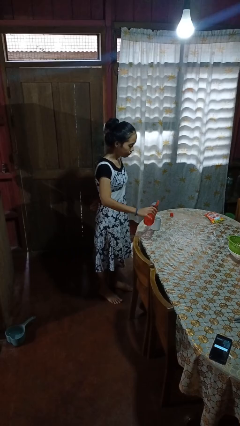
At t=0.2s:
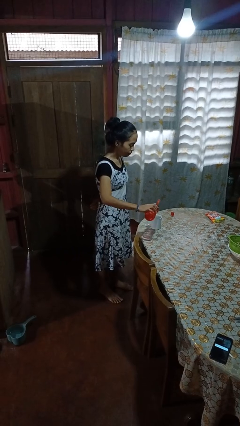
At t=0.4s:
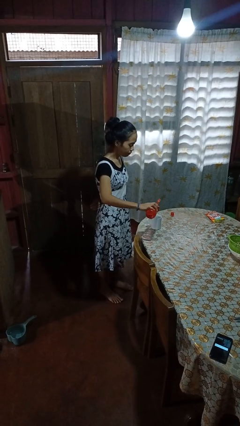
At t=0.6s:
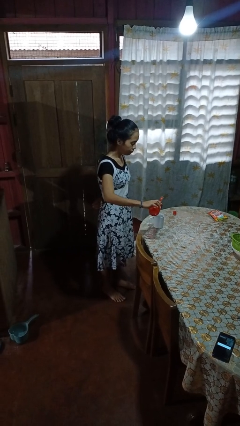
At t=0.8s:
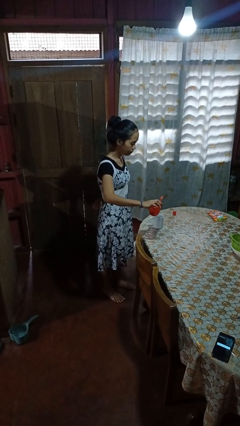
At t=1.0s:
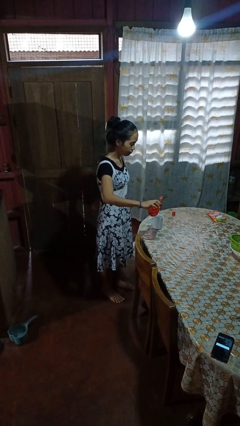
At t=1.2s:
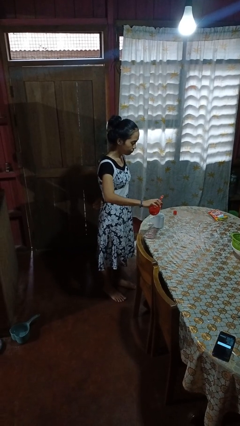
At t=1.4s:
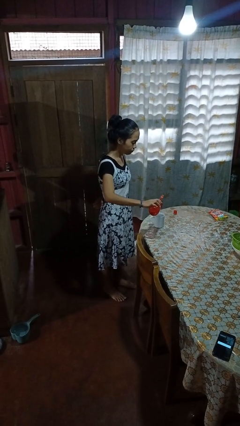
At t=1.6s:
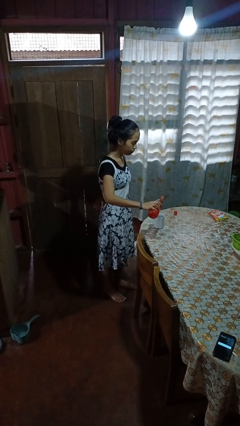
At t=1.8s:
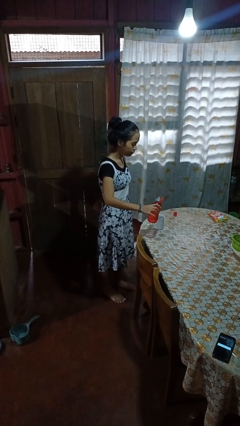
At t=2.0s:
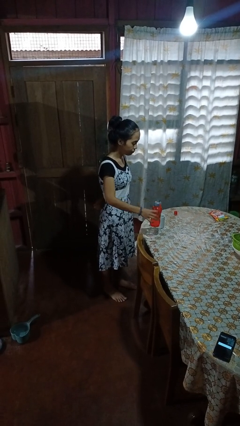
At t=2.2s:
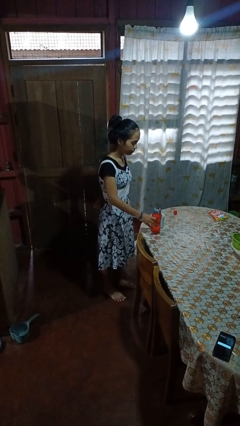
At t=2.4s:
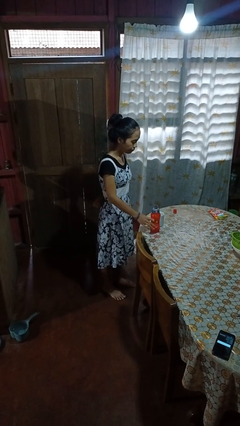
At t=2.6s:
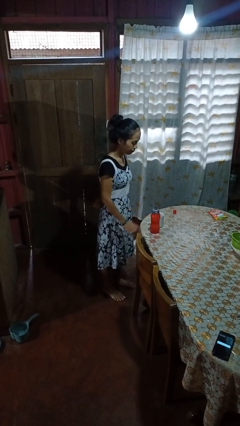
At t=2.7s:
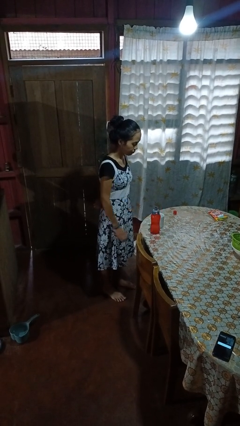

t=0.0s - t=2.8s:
person pours liquid into cup

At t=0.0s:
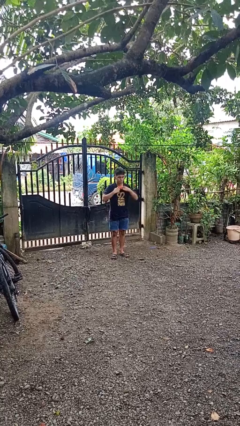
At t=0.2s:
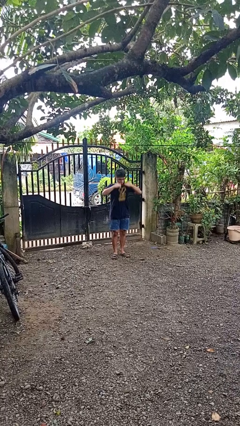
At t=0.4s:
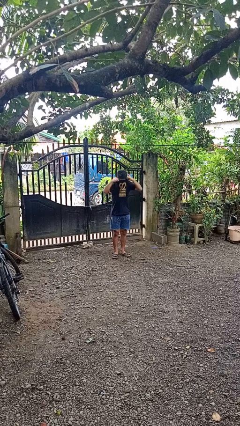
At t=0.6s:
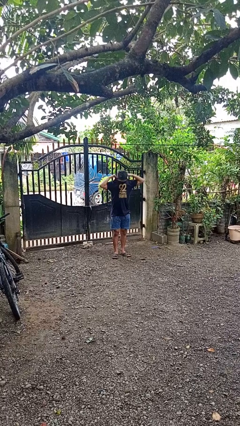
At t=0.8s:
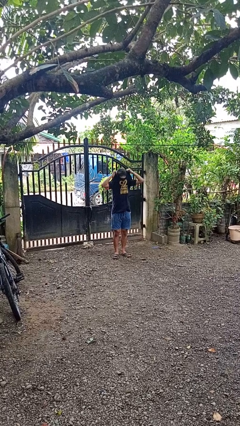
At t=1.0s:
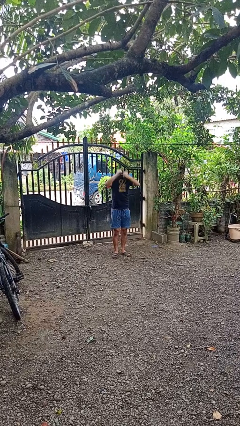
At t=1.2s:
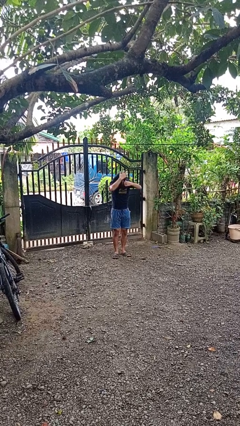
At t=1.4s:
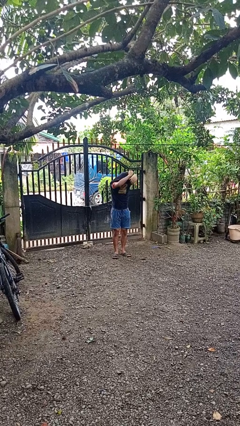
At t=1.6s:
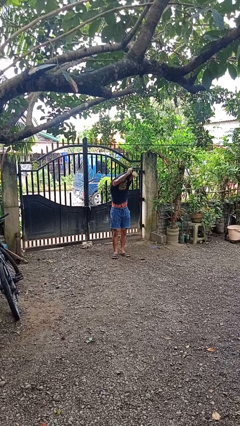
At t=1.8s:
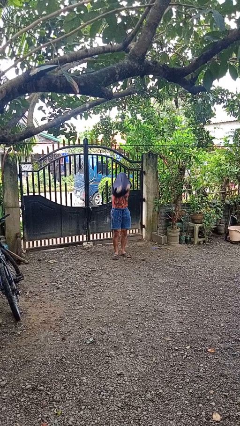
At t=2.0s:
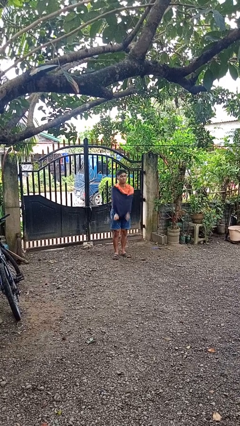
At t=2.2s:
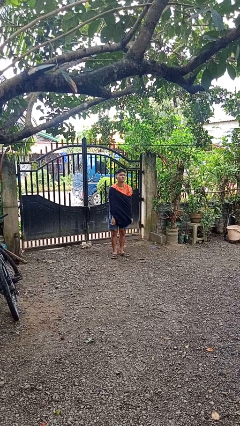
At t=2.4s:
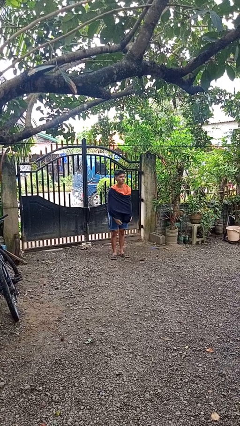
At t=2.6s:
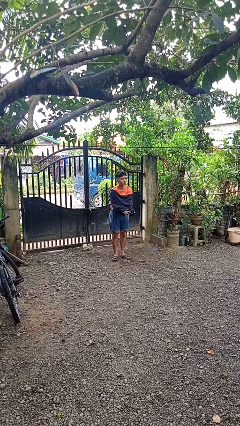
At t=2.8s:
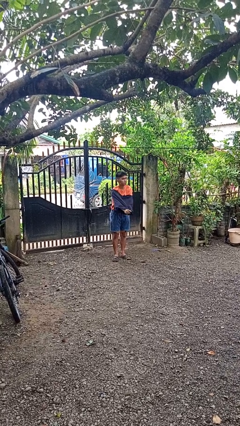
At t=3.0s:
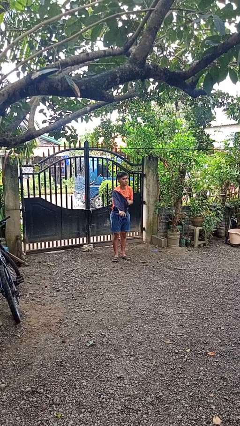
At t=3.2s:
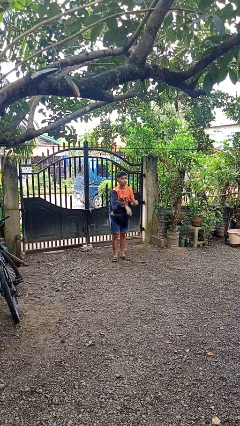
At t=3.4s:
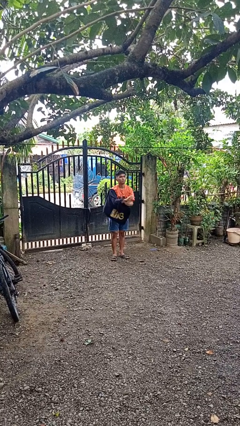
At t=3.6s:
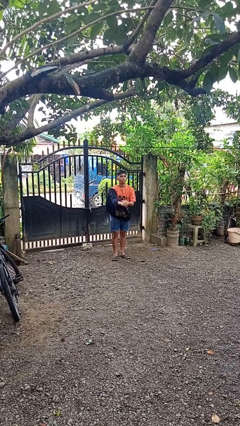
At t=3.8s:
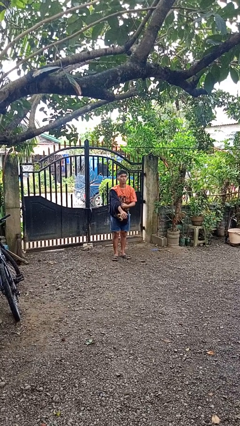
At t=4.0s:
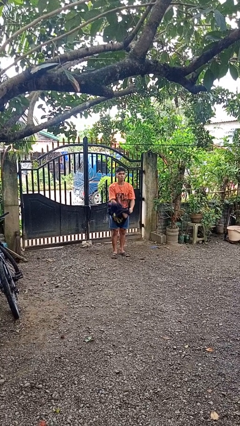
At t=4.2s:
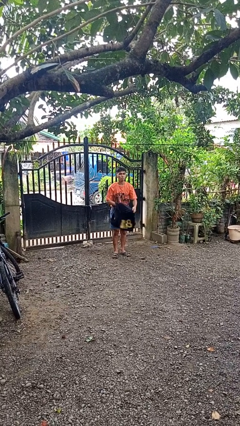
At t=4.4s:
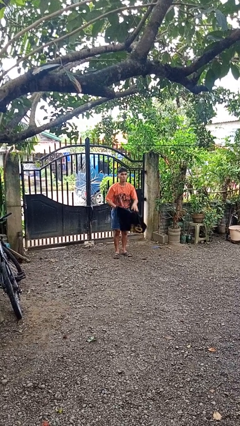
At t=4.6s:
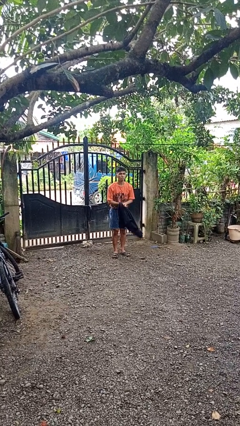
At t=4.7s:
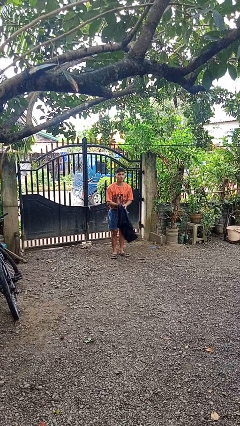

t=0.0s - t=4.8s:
person takes off shirt

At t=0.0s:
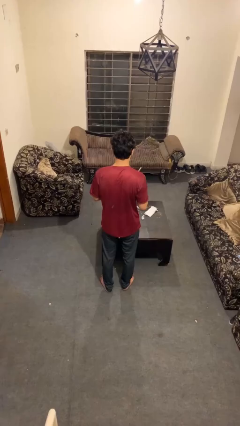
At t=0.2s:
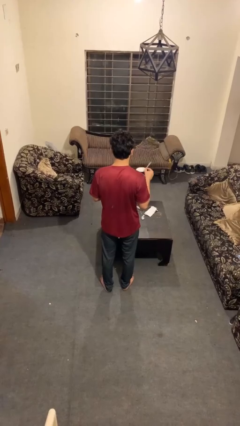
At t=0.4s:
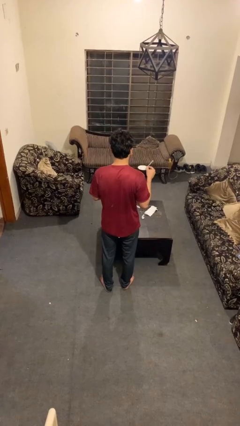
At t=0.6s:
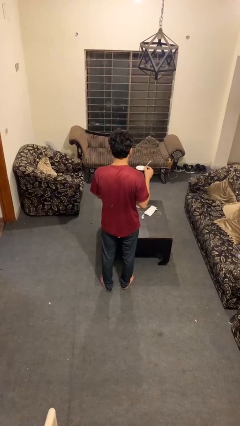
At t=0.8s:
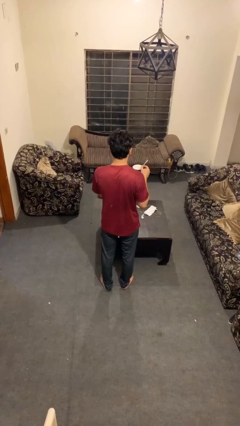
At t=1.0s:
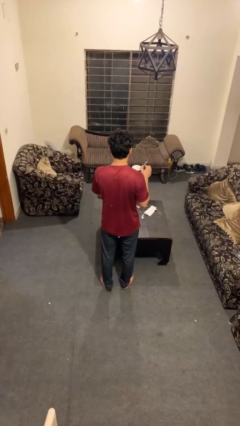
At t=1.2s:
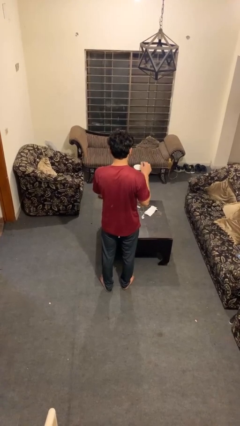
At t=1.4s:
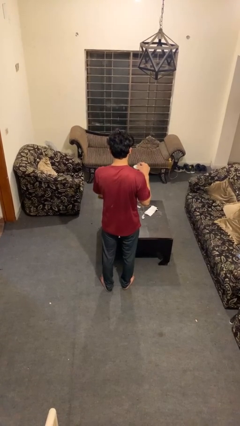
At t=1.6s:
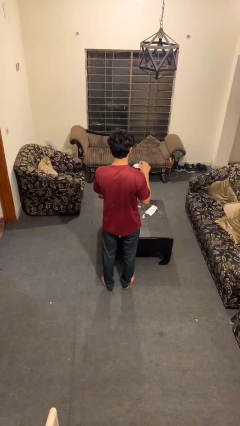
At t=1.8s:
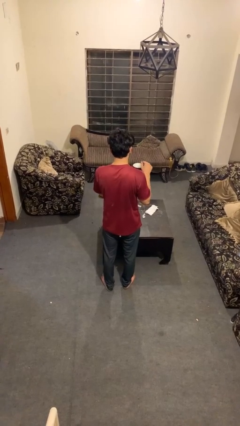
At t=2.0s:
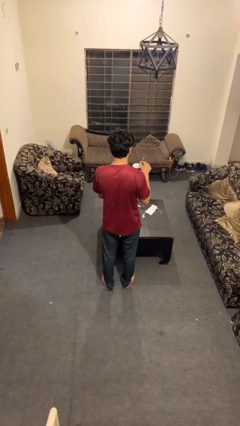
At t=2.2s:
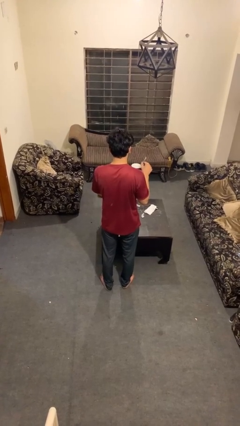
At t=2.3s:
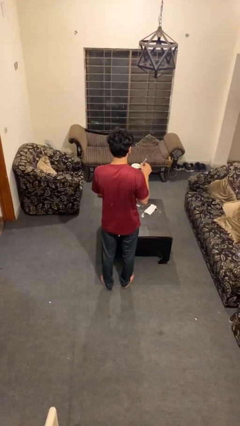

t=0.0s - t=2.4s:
person stirs mug

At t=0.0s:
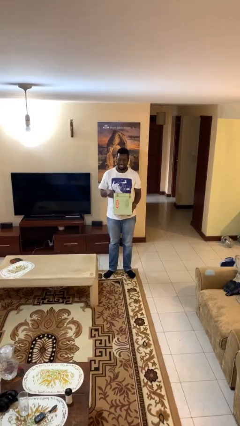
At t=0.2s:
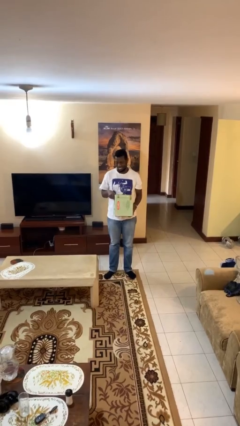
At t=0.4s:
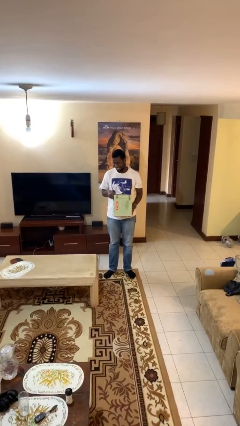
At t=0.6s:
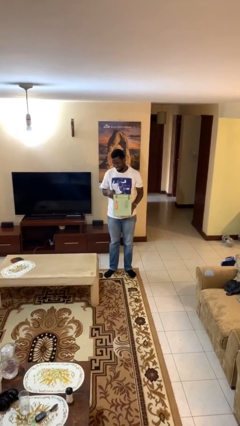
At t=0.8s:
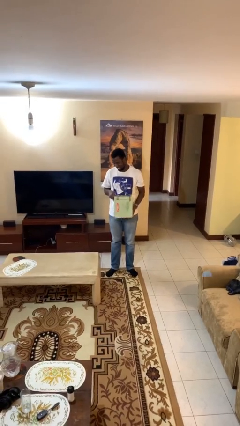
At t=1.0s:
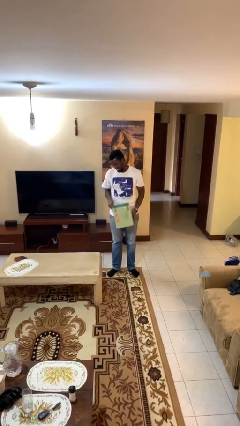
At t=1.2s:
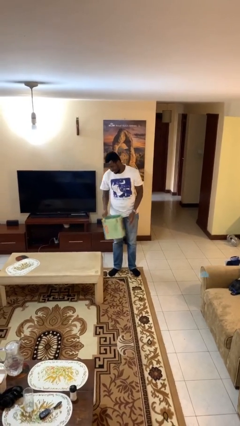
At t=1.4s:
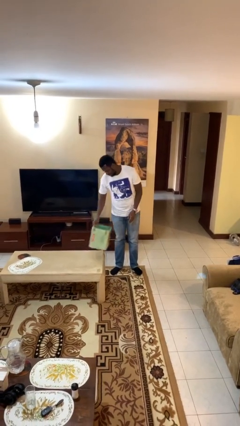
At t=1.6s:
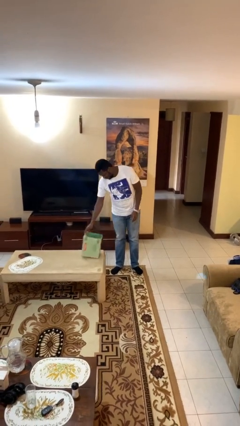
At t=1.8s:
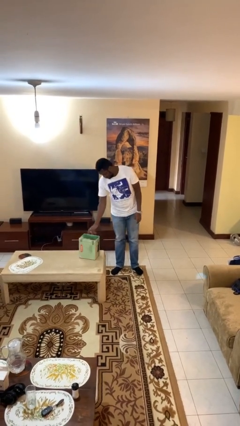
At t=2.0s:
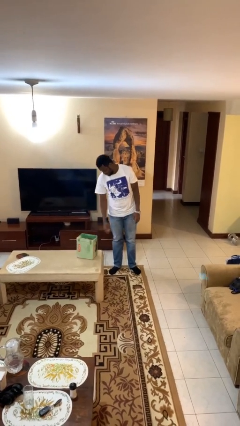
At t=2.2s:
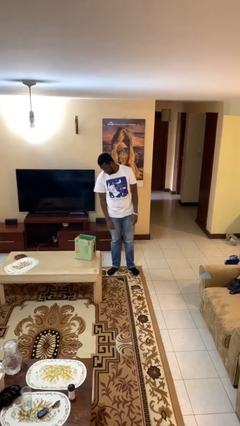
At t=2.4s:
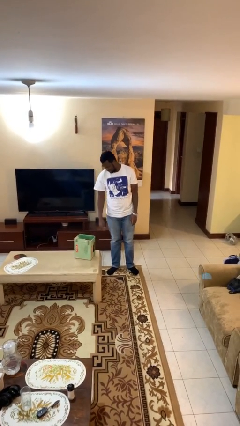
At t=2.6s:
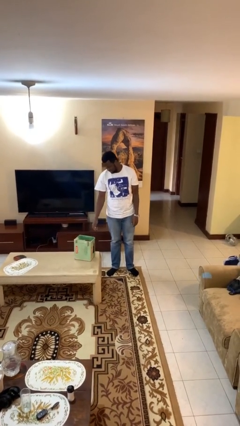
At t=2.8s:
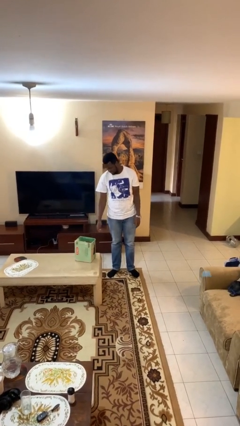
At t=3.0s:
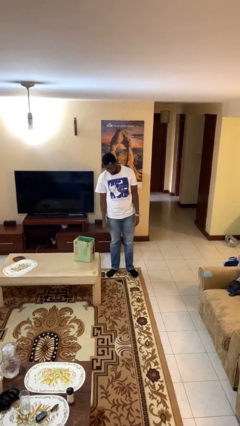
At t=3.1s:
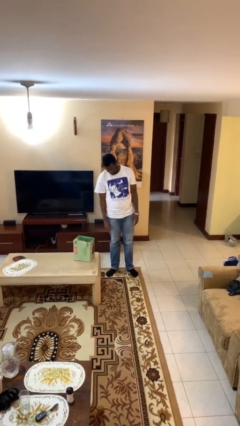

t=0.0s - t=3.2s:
person puts down object on table

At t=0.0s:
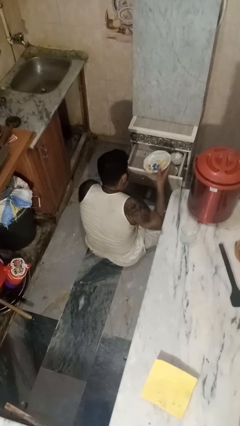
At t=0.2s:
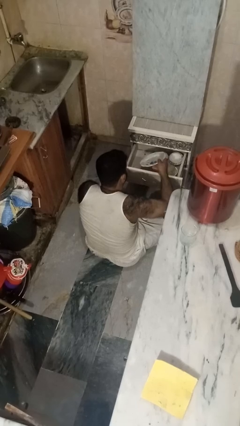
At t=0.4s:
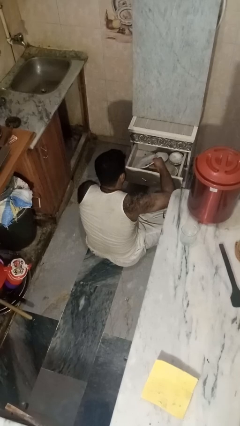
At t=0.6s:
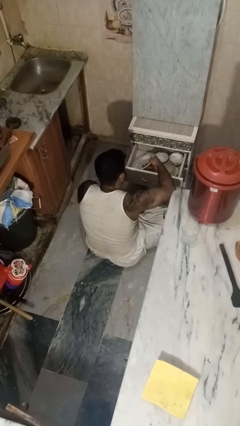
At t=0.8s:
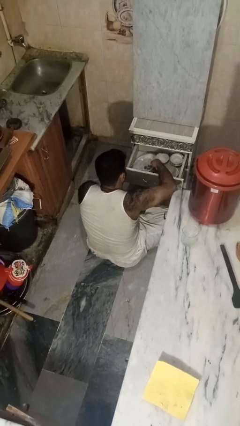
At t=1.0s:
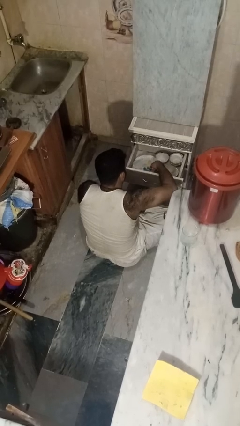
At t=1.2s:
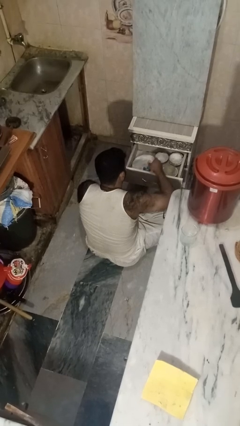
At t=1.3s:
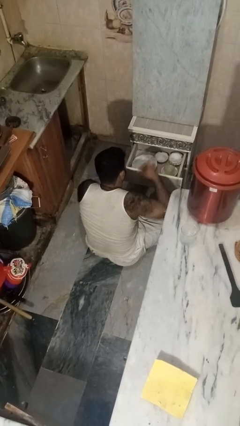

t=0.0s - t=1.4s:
person puts object into kitchen drawer

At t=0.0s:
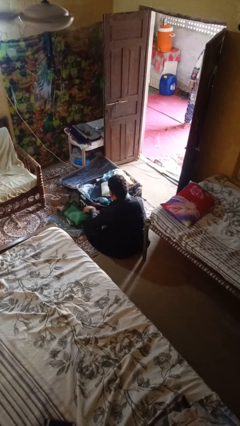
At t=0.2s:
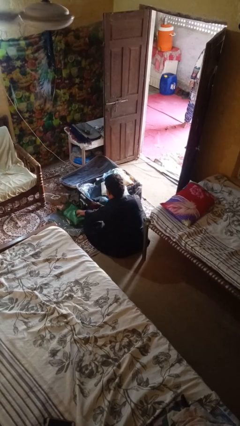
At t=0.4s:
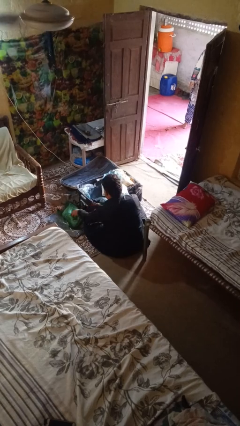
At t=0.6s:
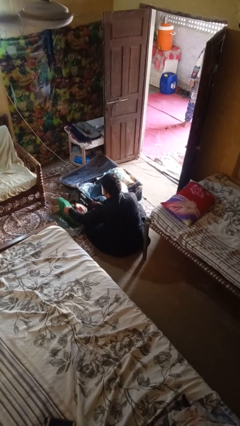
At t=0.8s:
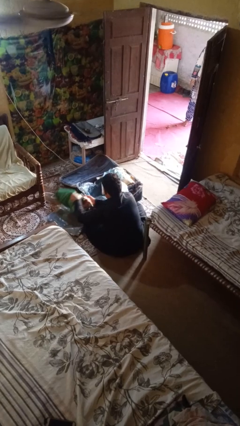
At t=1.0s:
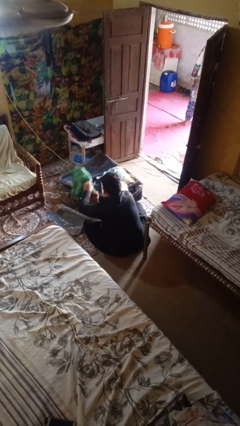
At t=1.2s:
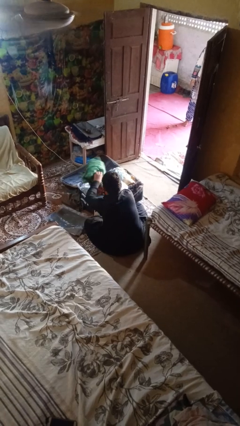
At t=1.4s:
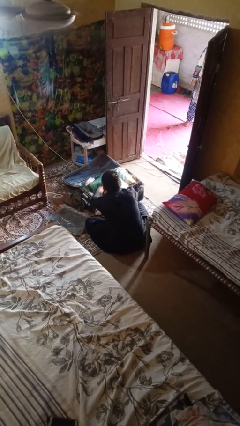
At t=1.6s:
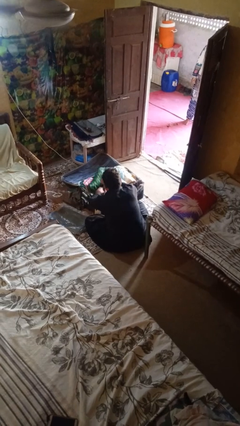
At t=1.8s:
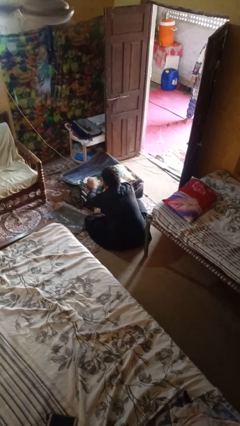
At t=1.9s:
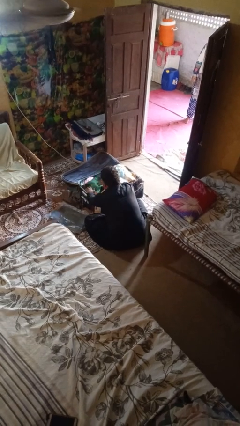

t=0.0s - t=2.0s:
person loads clothes into suitcase

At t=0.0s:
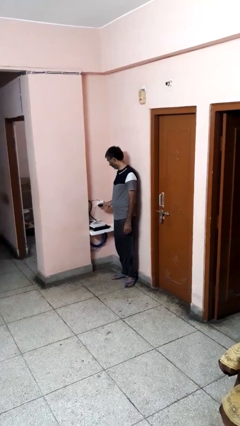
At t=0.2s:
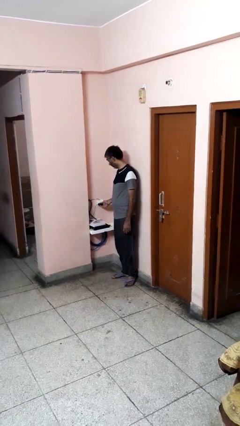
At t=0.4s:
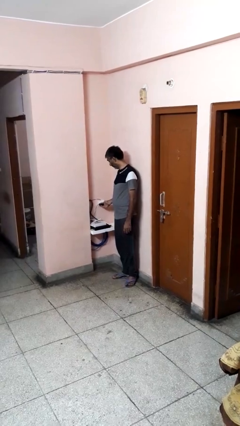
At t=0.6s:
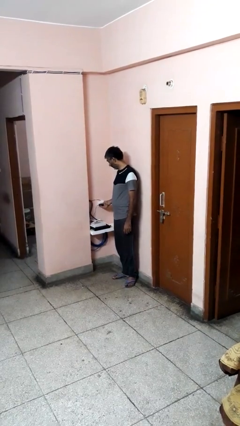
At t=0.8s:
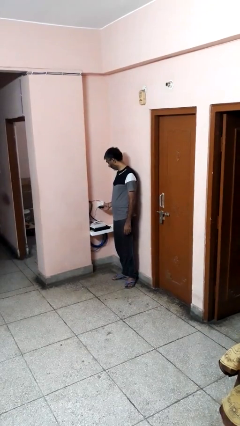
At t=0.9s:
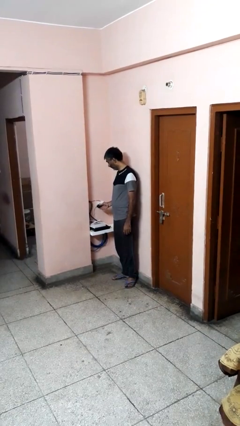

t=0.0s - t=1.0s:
person unplugs from electrical socket
